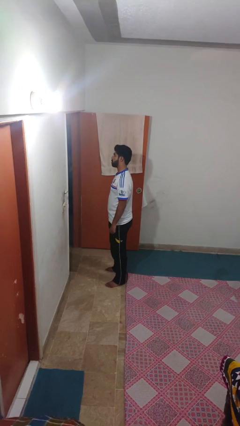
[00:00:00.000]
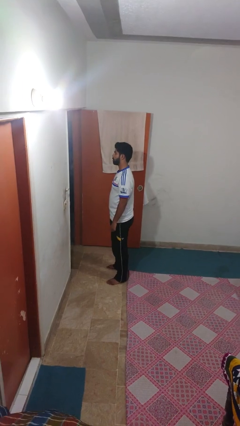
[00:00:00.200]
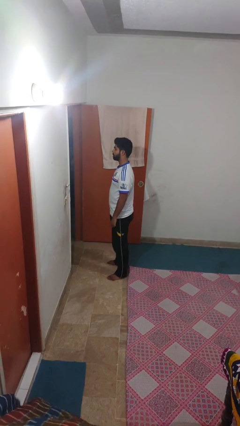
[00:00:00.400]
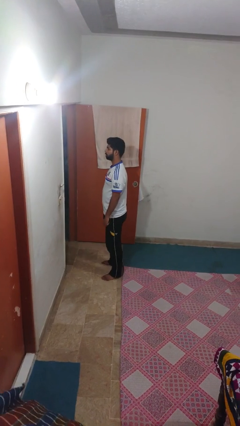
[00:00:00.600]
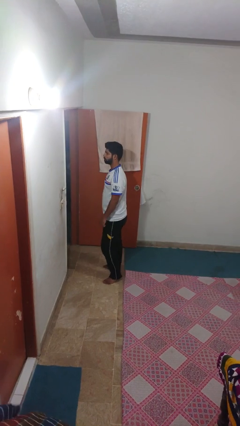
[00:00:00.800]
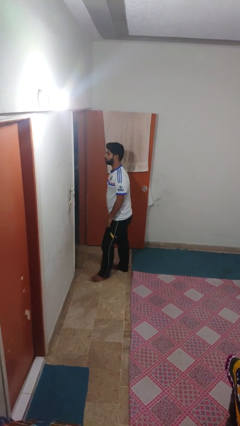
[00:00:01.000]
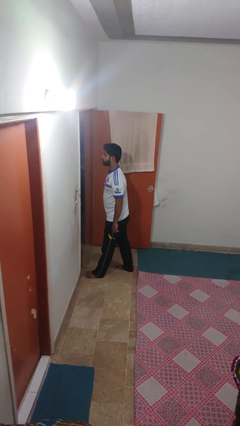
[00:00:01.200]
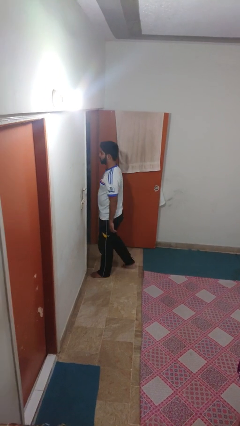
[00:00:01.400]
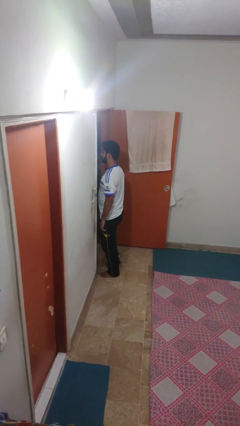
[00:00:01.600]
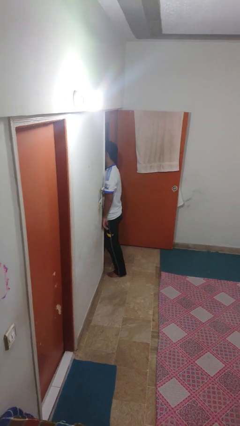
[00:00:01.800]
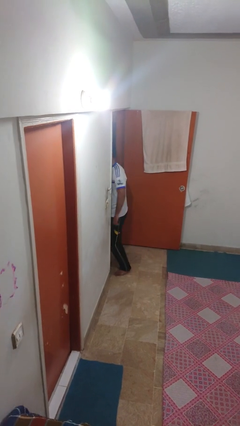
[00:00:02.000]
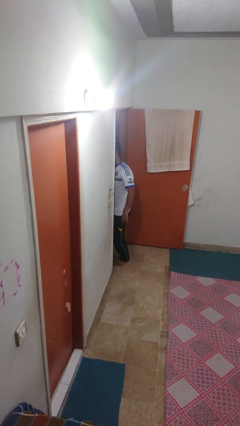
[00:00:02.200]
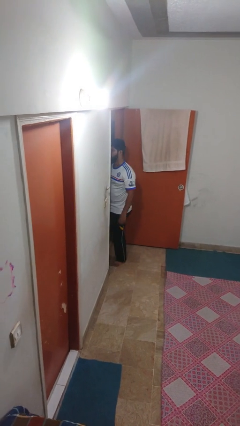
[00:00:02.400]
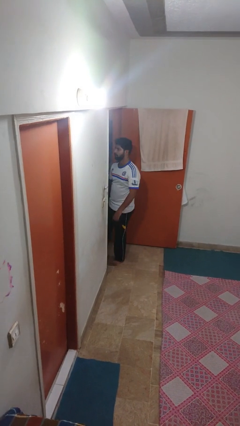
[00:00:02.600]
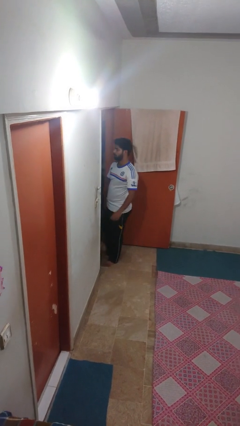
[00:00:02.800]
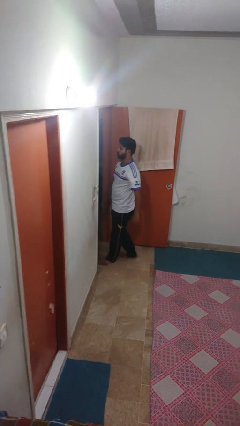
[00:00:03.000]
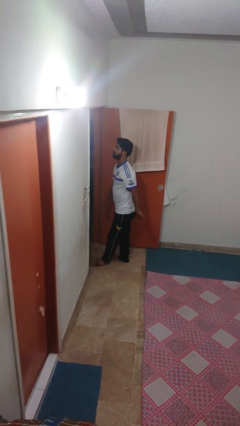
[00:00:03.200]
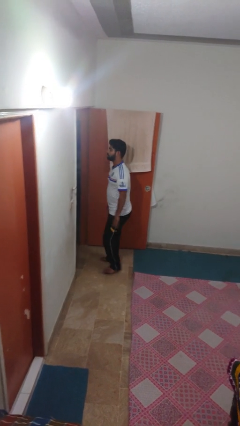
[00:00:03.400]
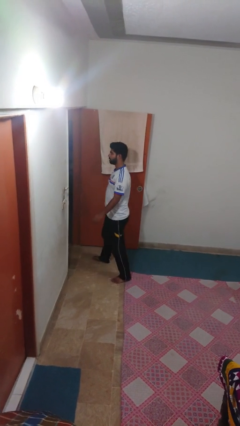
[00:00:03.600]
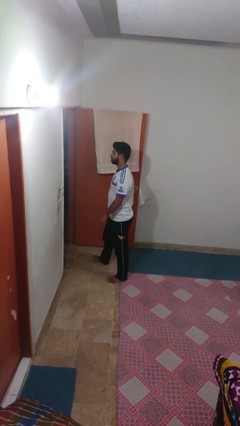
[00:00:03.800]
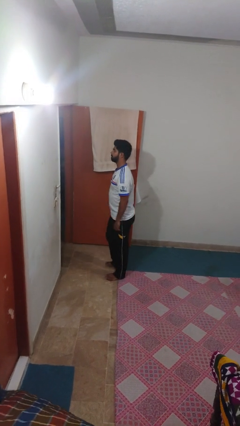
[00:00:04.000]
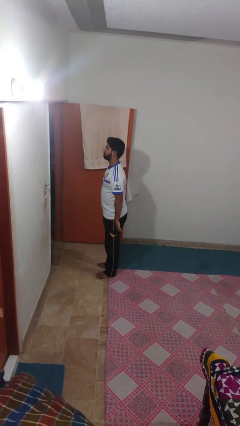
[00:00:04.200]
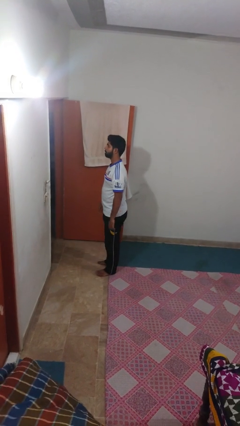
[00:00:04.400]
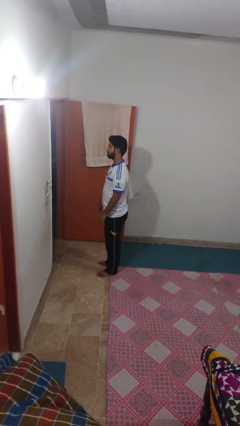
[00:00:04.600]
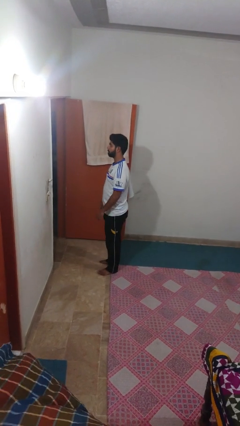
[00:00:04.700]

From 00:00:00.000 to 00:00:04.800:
person bumps into wall

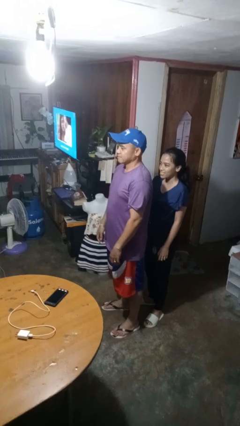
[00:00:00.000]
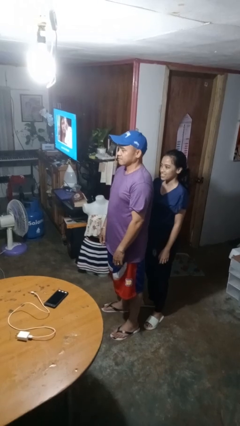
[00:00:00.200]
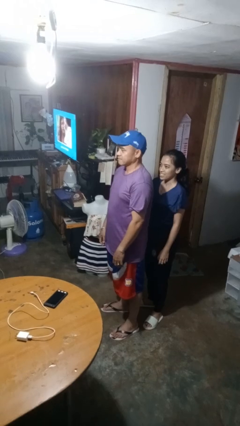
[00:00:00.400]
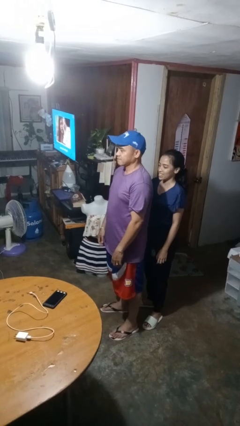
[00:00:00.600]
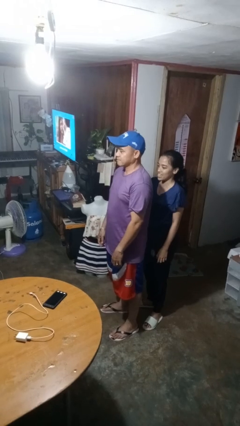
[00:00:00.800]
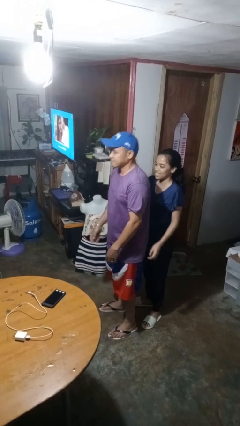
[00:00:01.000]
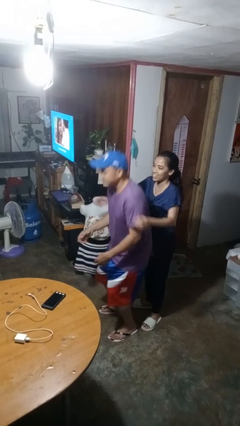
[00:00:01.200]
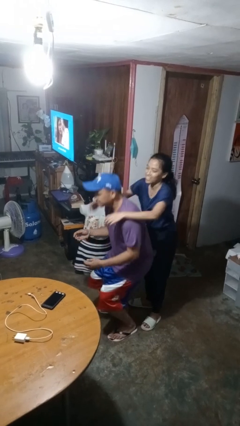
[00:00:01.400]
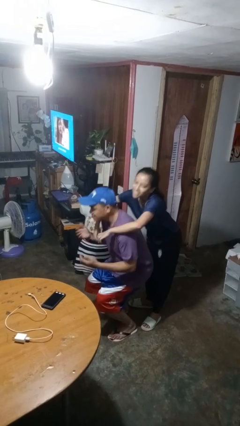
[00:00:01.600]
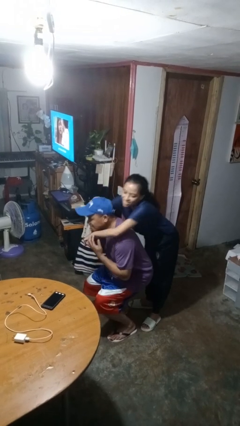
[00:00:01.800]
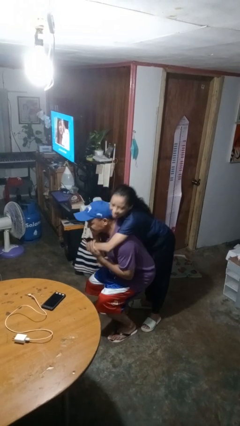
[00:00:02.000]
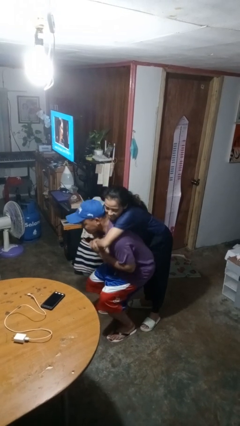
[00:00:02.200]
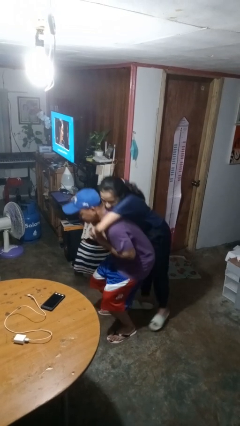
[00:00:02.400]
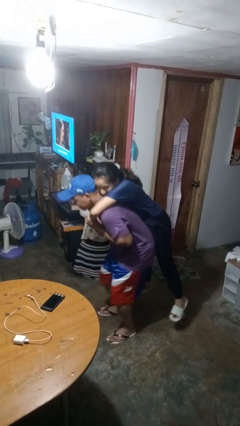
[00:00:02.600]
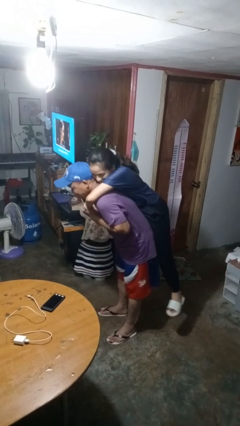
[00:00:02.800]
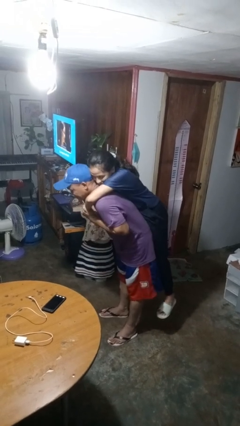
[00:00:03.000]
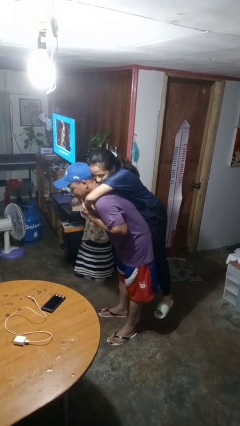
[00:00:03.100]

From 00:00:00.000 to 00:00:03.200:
person picks up person

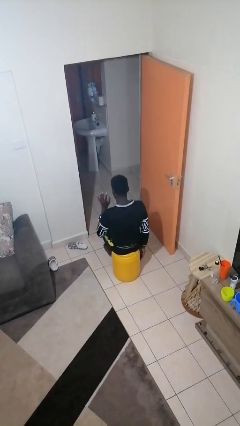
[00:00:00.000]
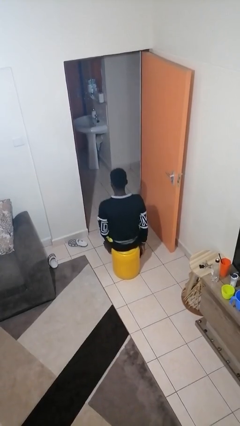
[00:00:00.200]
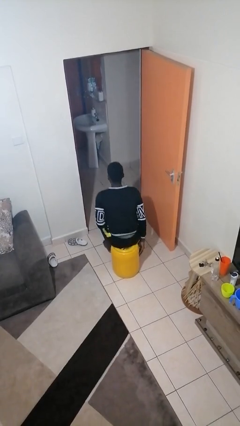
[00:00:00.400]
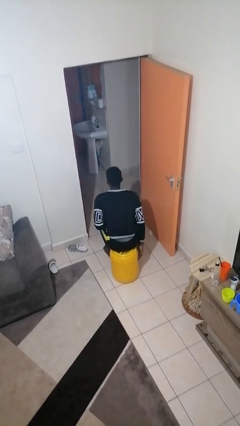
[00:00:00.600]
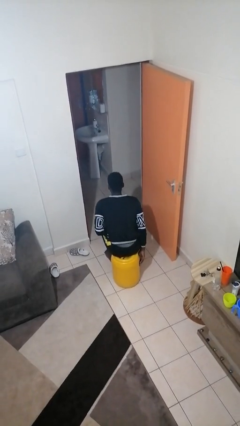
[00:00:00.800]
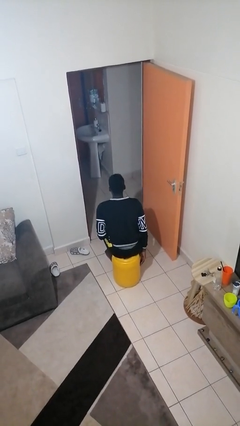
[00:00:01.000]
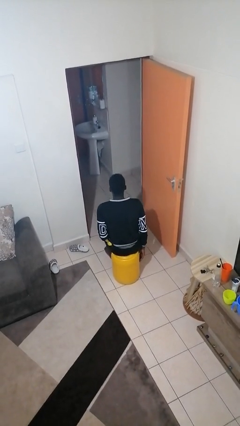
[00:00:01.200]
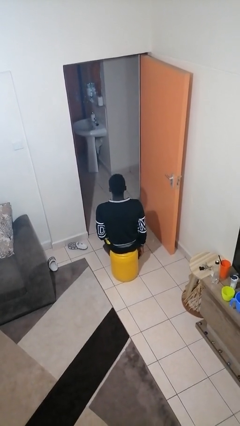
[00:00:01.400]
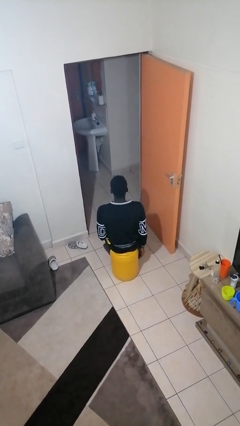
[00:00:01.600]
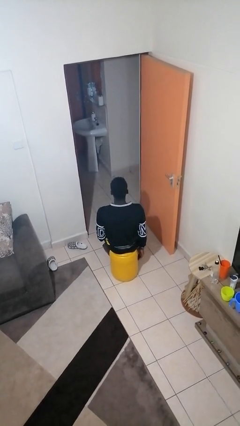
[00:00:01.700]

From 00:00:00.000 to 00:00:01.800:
person slaps hands on thighs

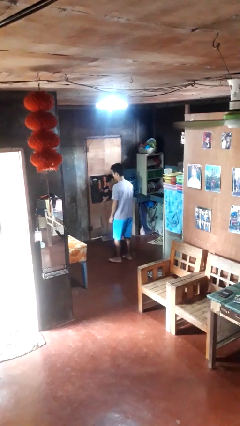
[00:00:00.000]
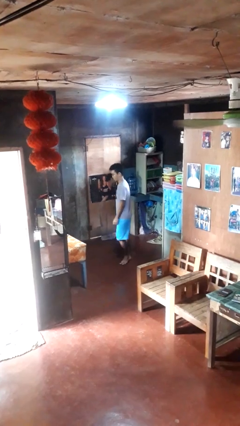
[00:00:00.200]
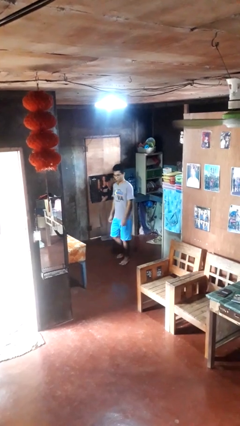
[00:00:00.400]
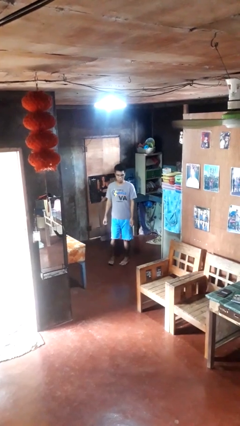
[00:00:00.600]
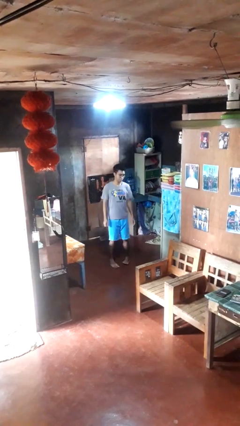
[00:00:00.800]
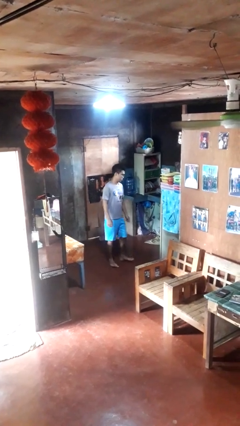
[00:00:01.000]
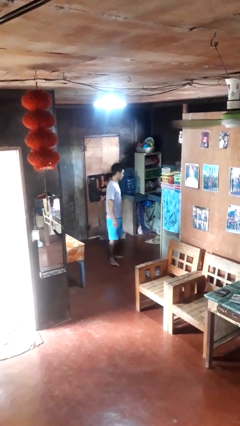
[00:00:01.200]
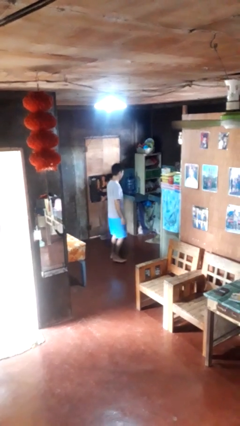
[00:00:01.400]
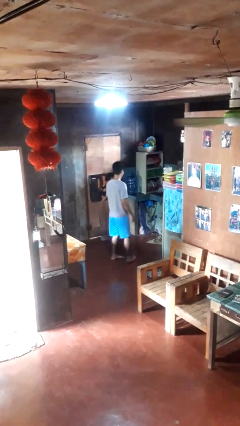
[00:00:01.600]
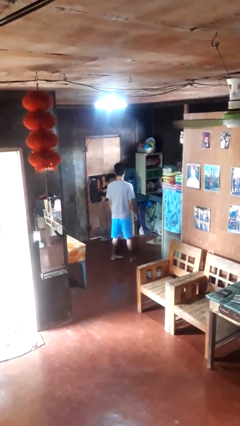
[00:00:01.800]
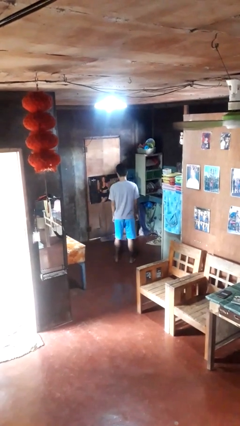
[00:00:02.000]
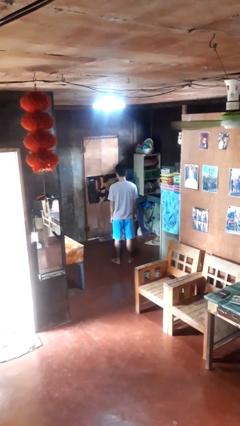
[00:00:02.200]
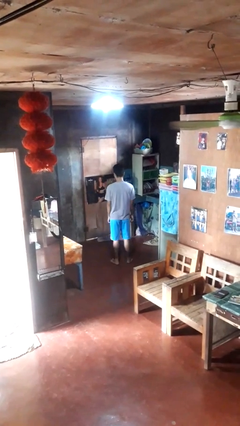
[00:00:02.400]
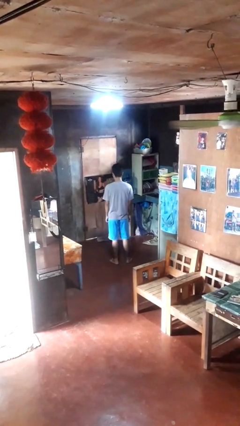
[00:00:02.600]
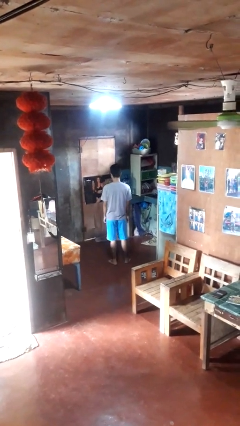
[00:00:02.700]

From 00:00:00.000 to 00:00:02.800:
person twirls

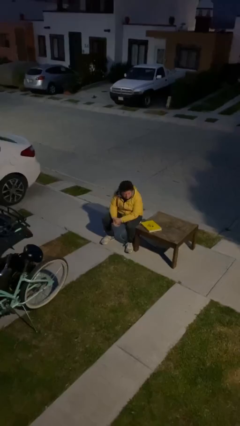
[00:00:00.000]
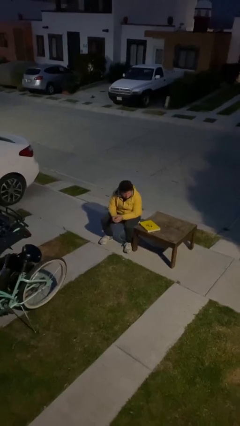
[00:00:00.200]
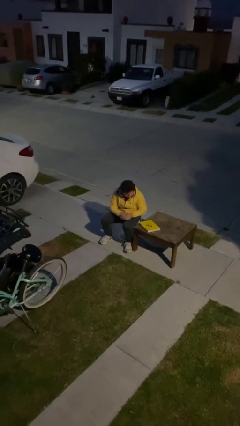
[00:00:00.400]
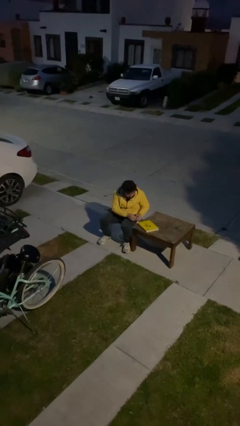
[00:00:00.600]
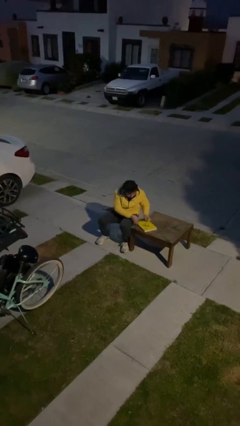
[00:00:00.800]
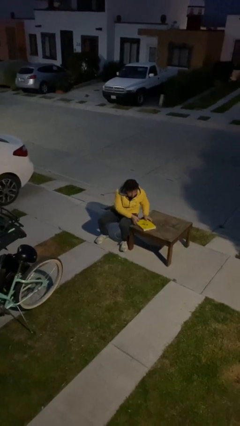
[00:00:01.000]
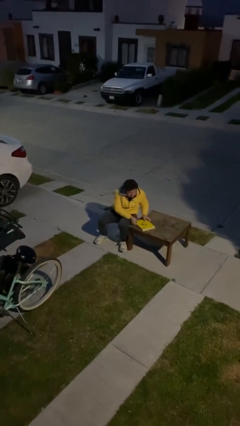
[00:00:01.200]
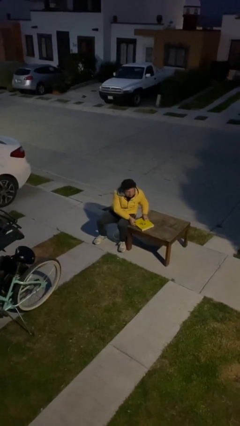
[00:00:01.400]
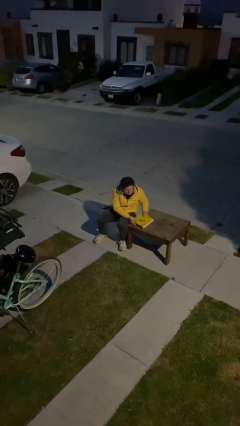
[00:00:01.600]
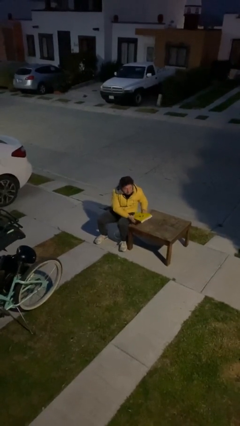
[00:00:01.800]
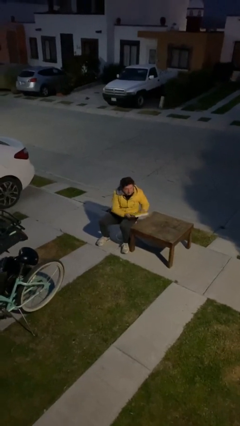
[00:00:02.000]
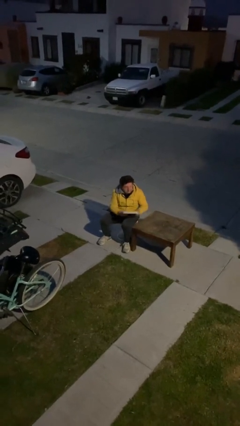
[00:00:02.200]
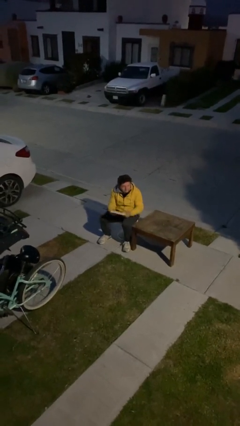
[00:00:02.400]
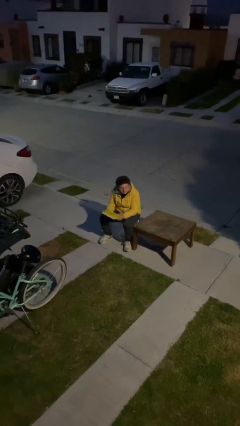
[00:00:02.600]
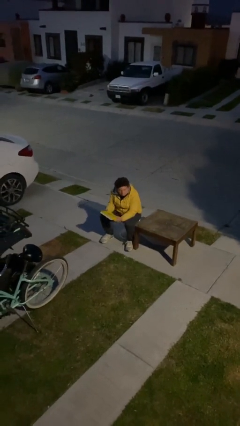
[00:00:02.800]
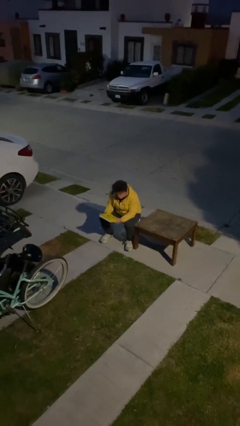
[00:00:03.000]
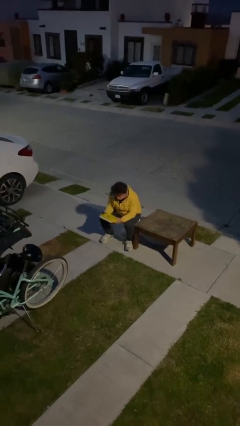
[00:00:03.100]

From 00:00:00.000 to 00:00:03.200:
person picks up object from table

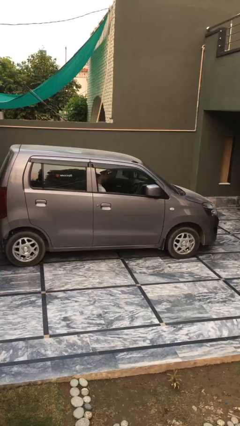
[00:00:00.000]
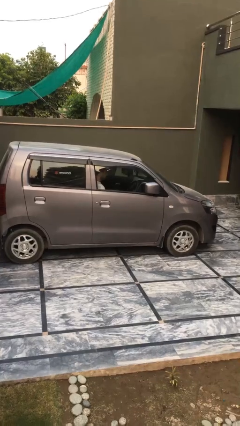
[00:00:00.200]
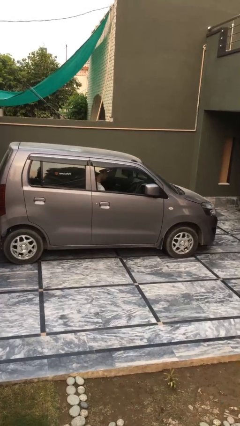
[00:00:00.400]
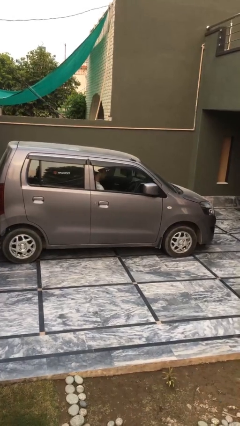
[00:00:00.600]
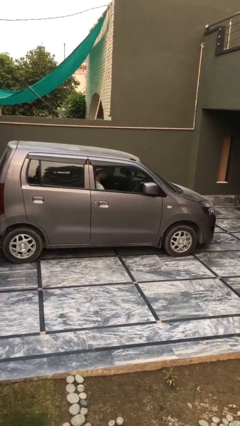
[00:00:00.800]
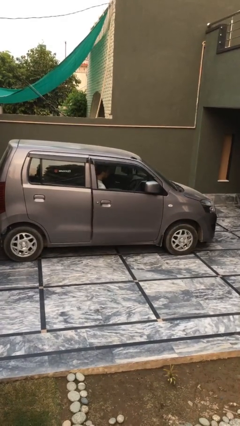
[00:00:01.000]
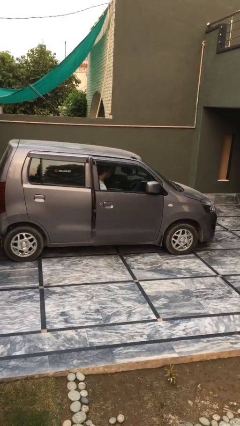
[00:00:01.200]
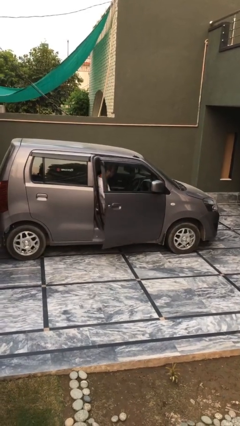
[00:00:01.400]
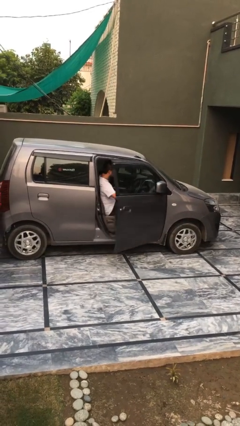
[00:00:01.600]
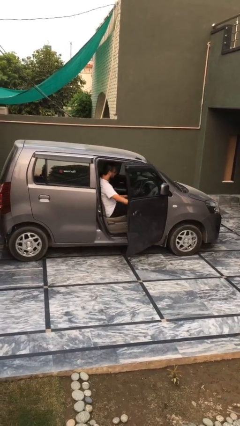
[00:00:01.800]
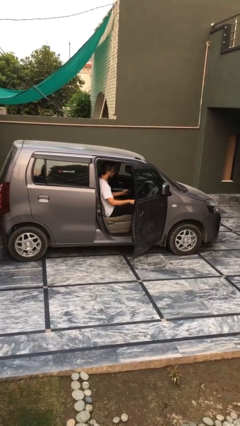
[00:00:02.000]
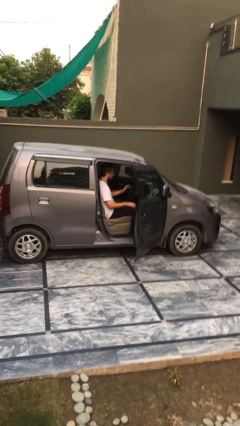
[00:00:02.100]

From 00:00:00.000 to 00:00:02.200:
person opens car door
